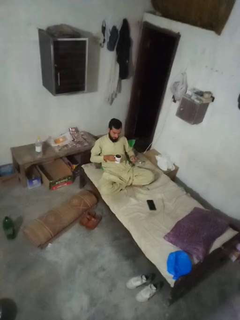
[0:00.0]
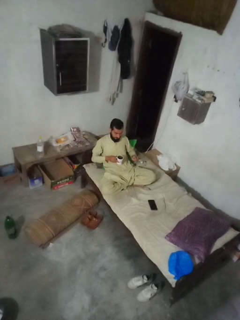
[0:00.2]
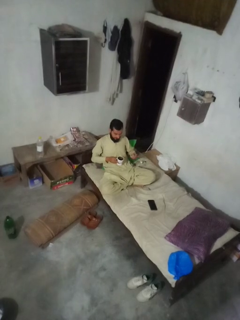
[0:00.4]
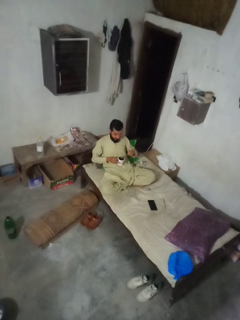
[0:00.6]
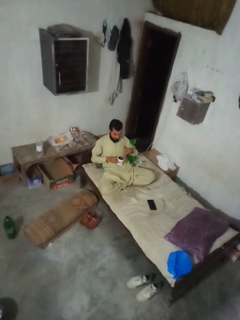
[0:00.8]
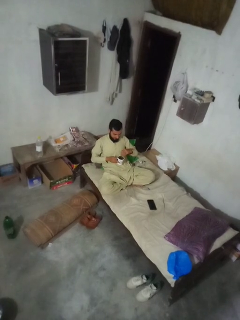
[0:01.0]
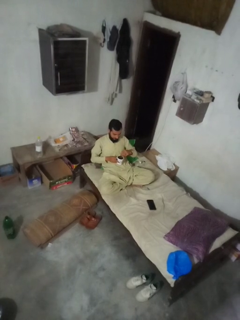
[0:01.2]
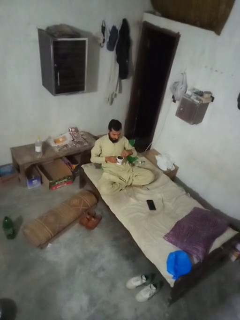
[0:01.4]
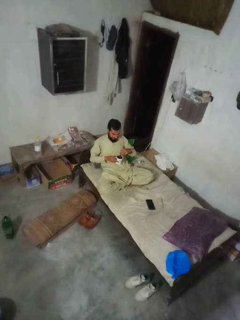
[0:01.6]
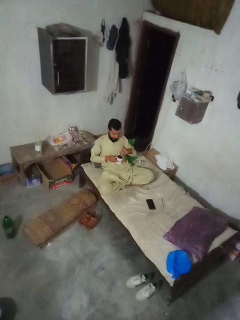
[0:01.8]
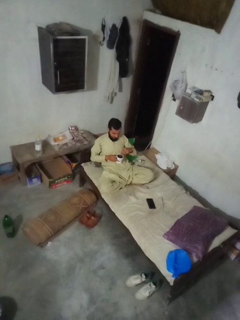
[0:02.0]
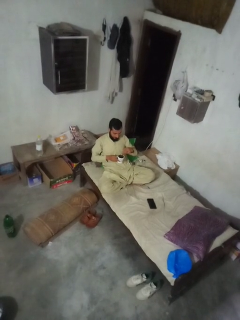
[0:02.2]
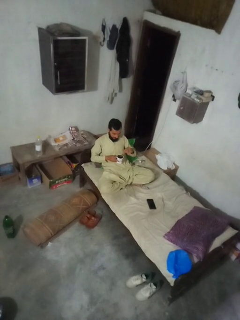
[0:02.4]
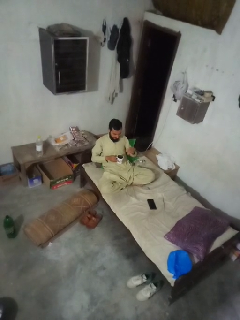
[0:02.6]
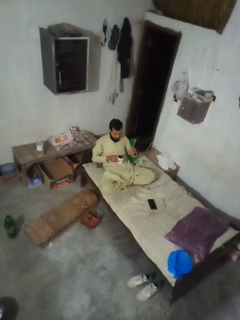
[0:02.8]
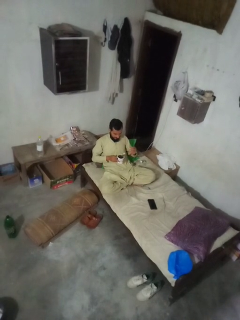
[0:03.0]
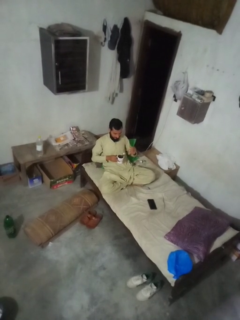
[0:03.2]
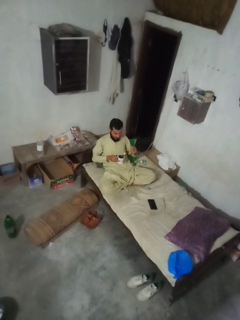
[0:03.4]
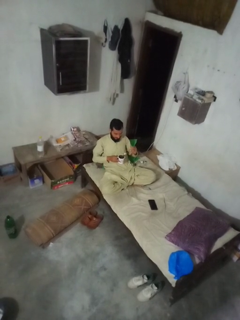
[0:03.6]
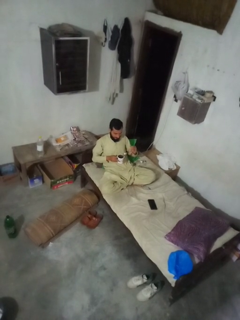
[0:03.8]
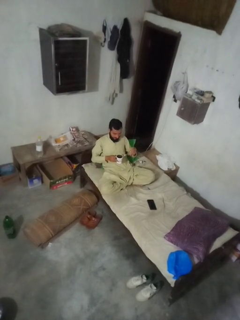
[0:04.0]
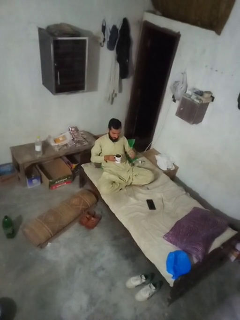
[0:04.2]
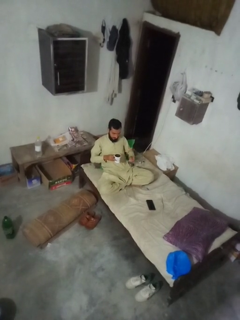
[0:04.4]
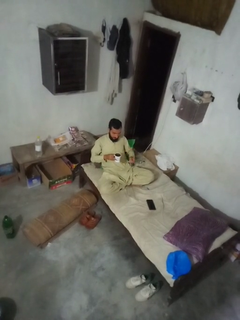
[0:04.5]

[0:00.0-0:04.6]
person stirs mug

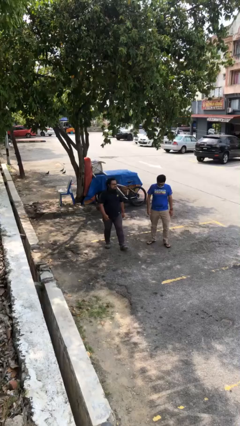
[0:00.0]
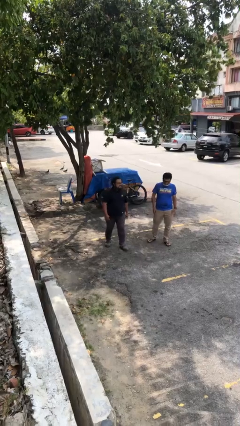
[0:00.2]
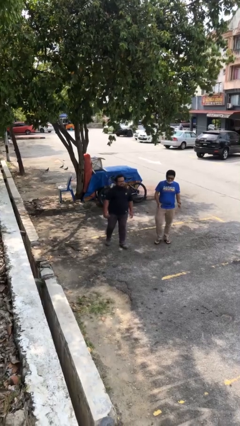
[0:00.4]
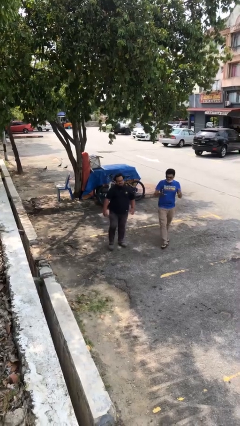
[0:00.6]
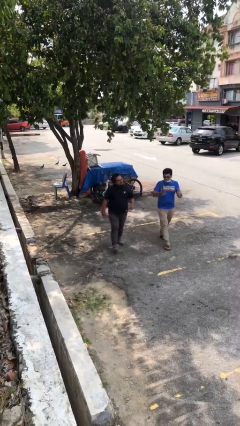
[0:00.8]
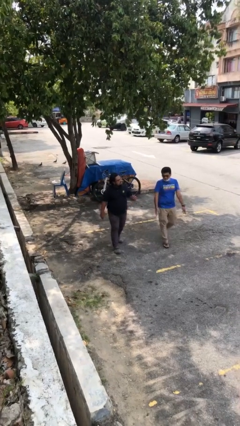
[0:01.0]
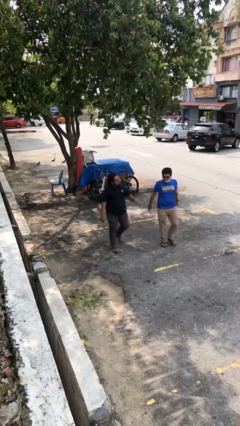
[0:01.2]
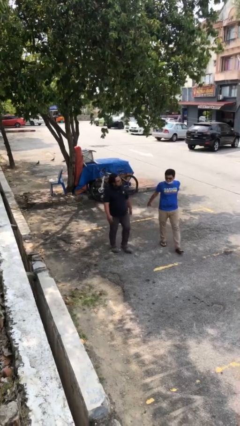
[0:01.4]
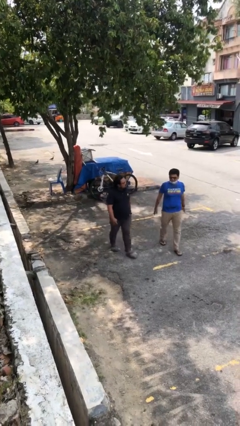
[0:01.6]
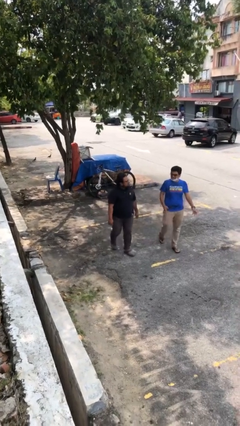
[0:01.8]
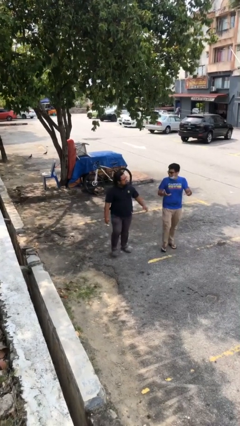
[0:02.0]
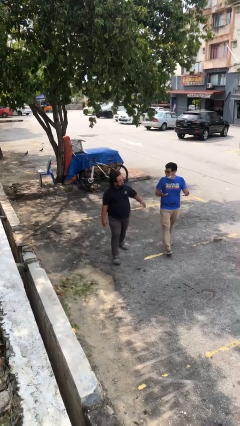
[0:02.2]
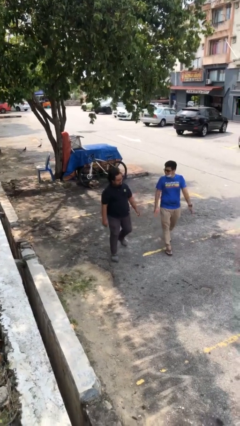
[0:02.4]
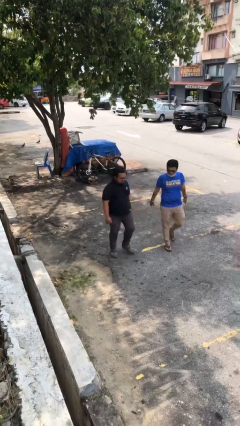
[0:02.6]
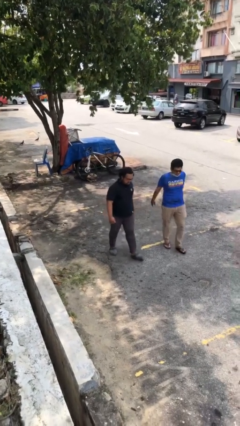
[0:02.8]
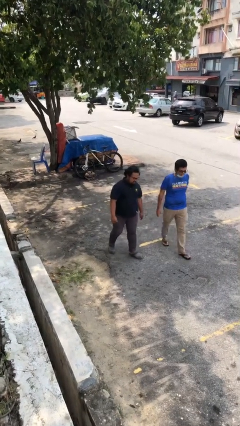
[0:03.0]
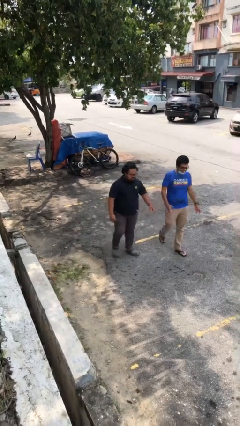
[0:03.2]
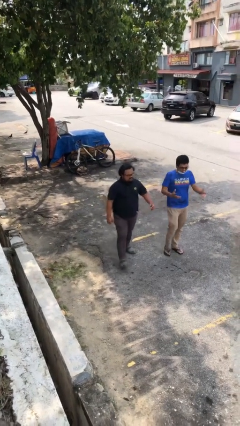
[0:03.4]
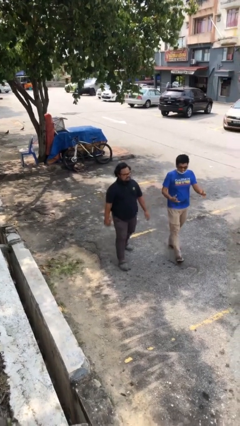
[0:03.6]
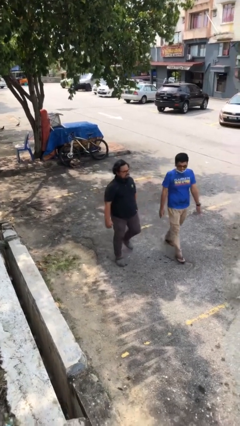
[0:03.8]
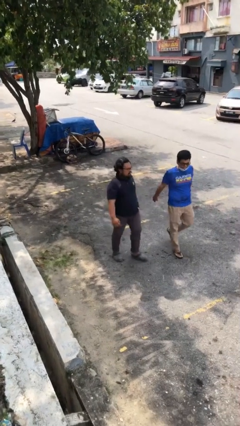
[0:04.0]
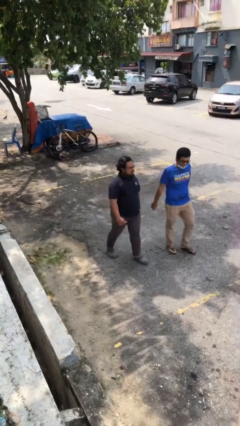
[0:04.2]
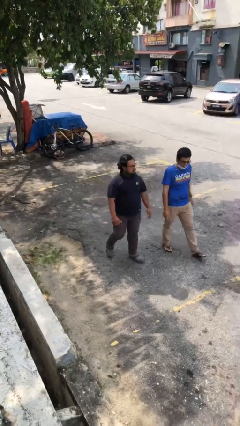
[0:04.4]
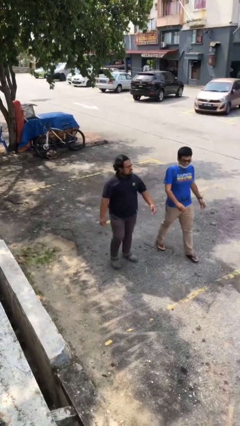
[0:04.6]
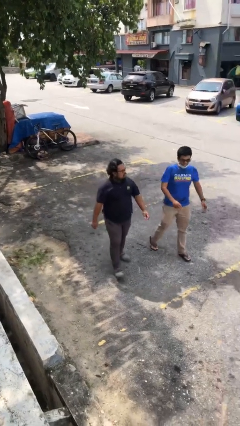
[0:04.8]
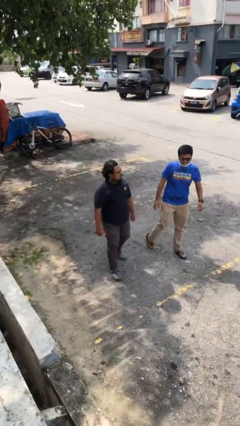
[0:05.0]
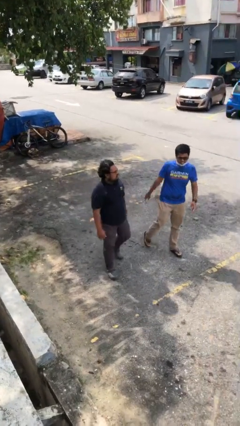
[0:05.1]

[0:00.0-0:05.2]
person talks to person

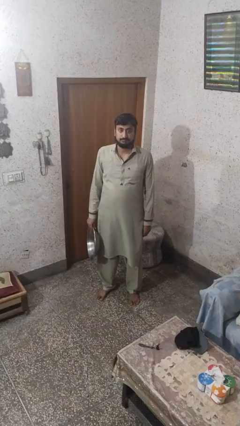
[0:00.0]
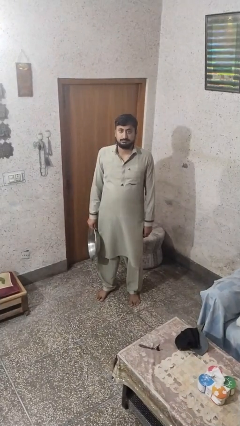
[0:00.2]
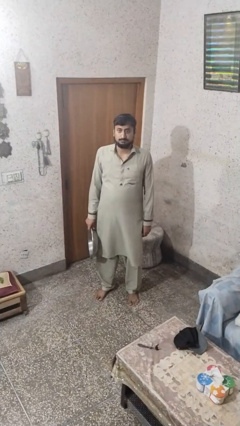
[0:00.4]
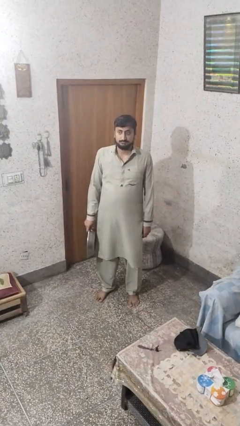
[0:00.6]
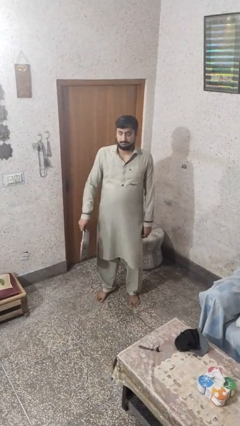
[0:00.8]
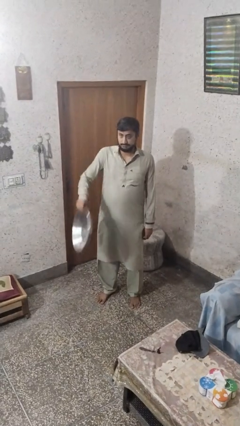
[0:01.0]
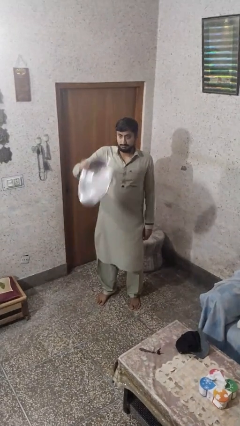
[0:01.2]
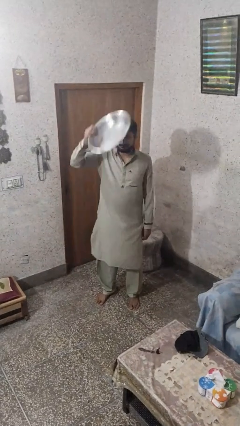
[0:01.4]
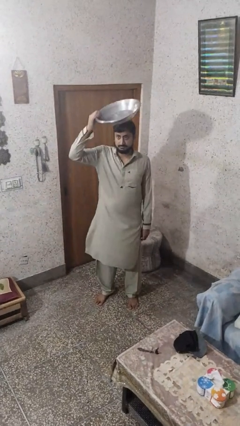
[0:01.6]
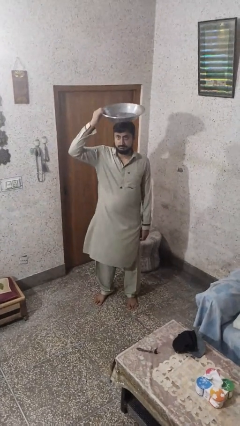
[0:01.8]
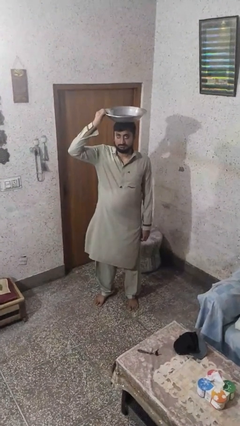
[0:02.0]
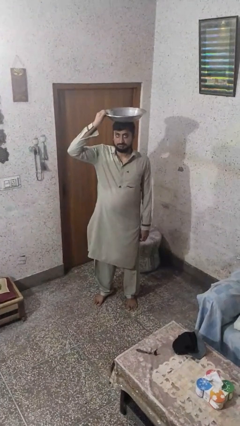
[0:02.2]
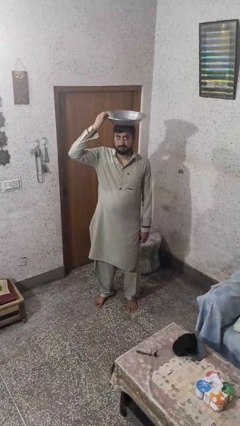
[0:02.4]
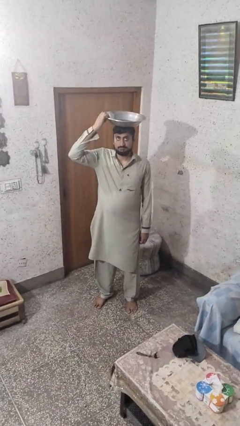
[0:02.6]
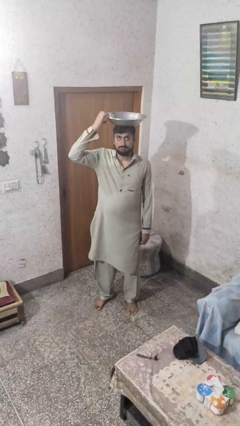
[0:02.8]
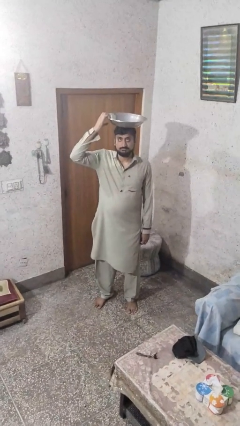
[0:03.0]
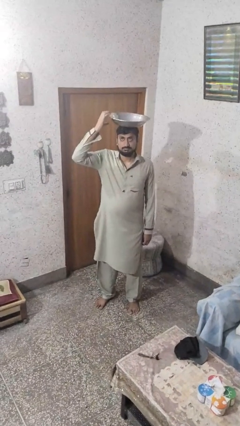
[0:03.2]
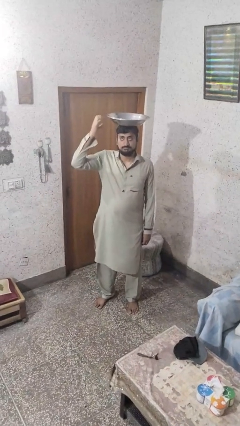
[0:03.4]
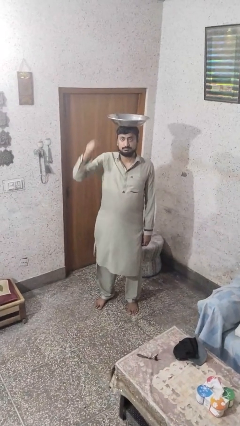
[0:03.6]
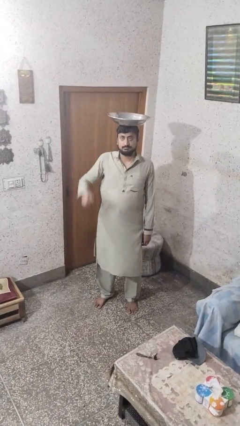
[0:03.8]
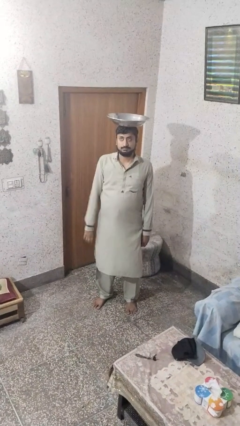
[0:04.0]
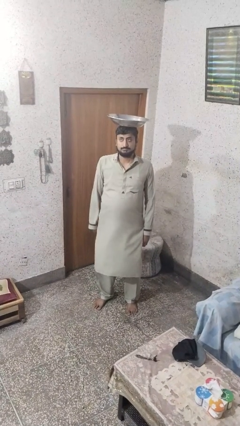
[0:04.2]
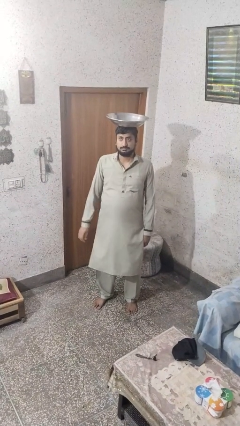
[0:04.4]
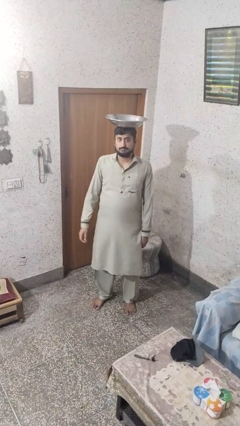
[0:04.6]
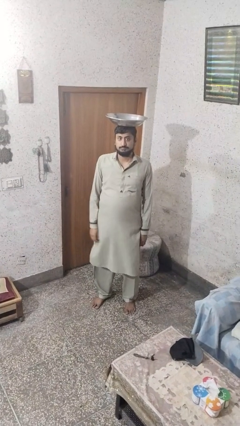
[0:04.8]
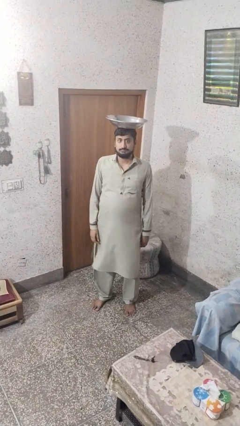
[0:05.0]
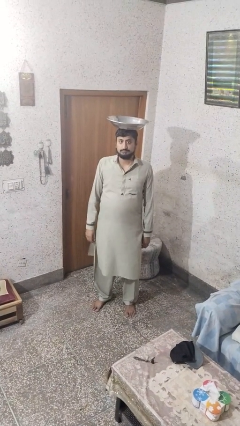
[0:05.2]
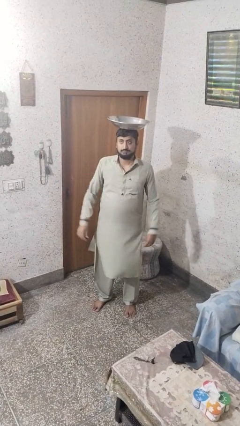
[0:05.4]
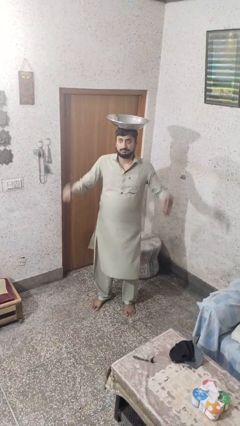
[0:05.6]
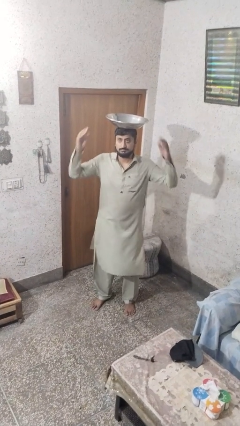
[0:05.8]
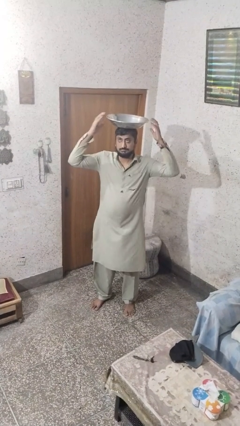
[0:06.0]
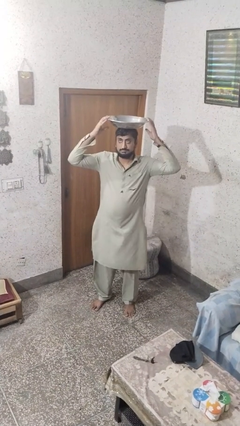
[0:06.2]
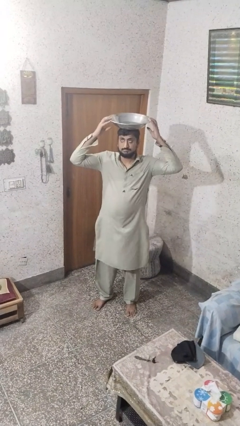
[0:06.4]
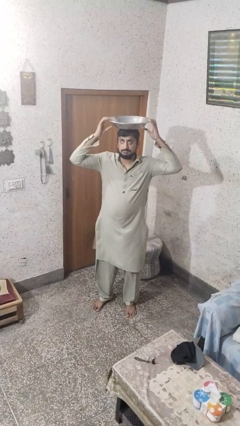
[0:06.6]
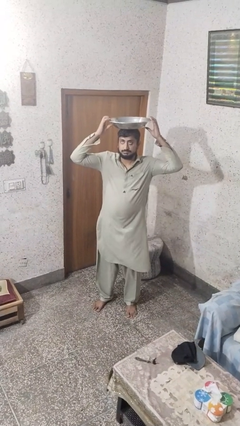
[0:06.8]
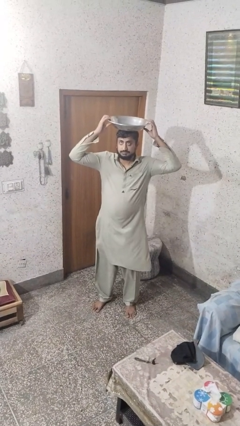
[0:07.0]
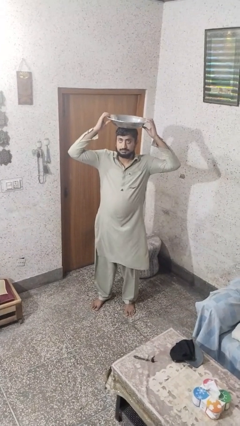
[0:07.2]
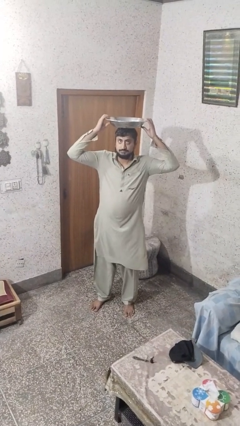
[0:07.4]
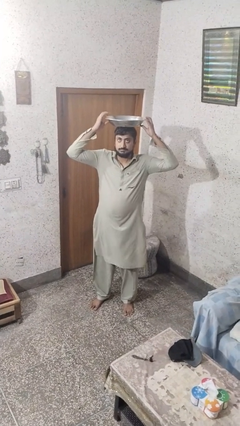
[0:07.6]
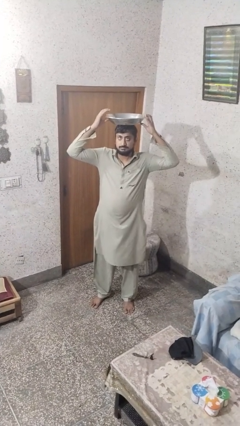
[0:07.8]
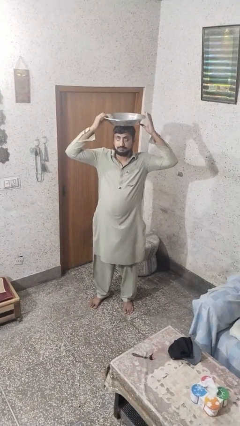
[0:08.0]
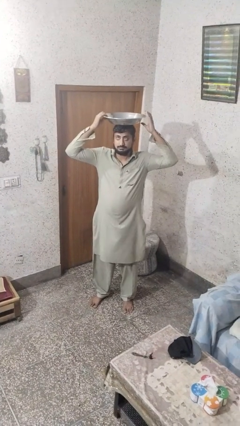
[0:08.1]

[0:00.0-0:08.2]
person holds object above head

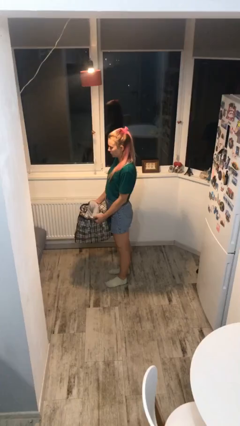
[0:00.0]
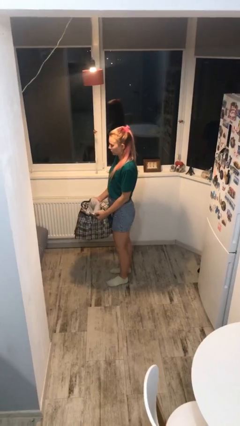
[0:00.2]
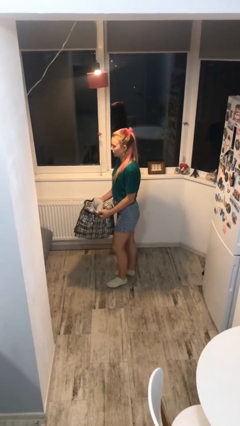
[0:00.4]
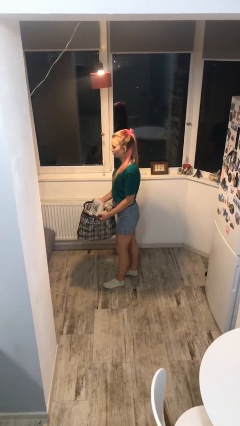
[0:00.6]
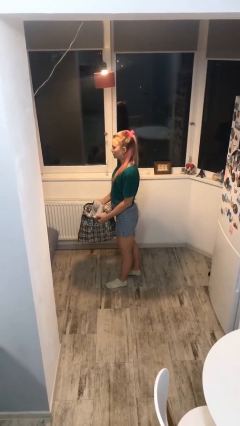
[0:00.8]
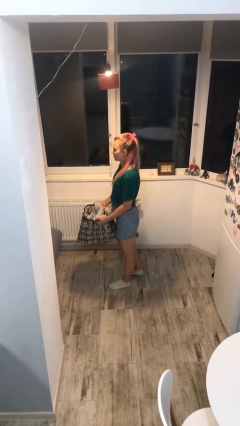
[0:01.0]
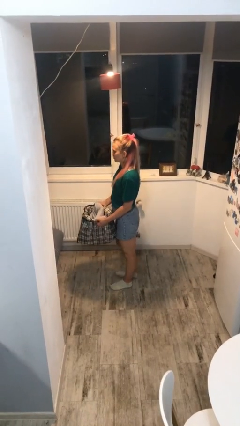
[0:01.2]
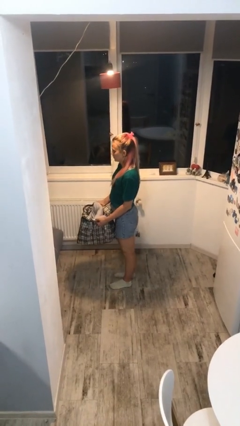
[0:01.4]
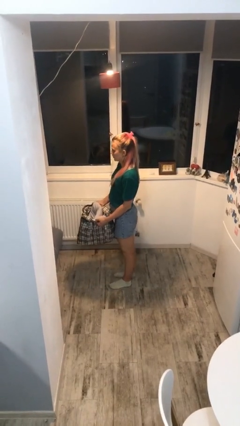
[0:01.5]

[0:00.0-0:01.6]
person carries laundry basket
